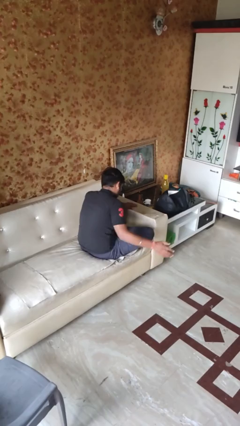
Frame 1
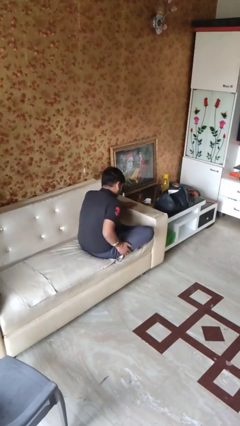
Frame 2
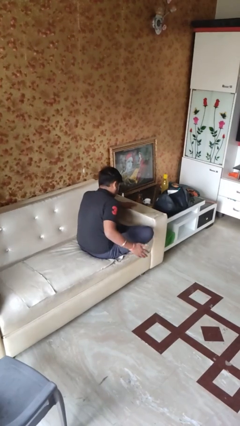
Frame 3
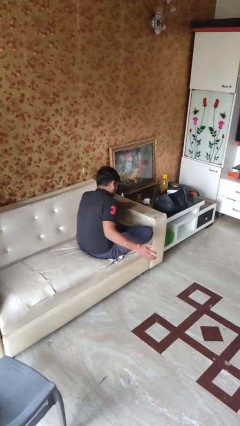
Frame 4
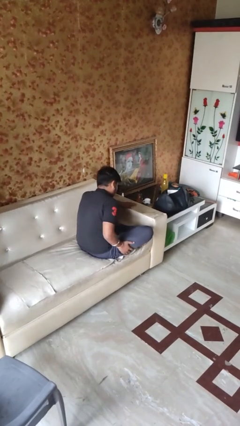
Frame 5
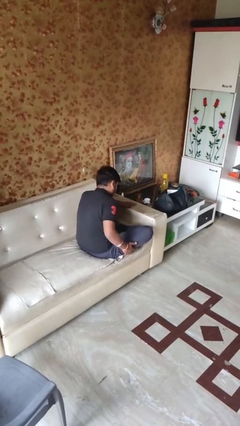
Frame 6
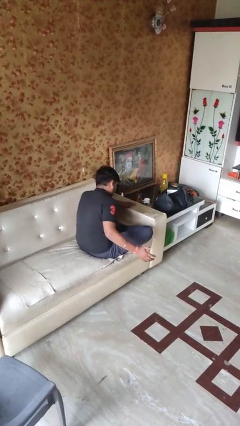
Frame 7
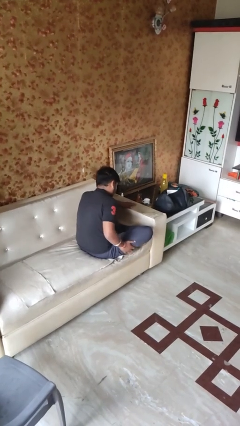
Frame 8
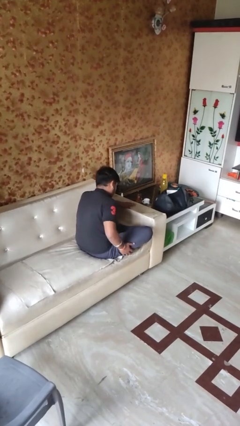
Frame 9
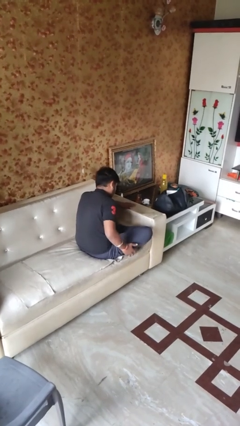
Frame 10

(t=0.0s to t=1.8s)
person slaps hands on thighs

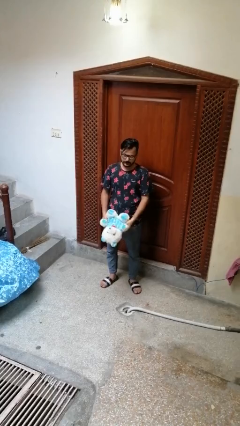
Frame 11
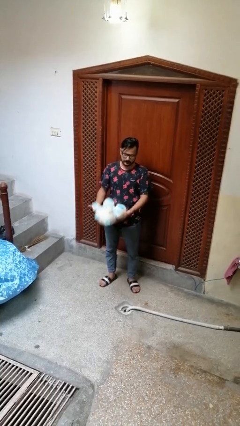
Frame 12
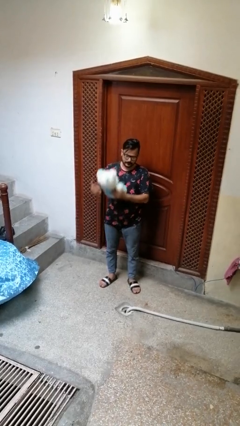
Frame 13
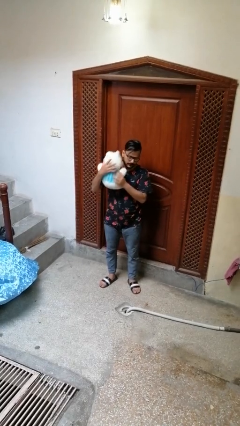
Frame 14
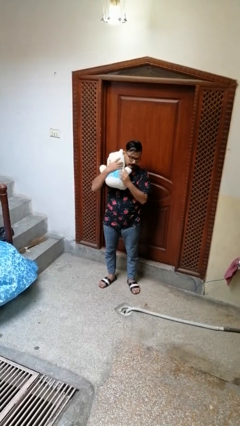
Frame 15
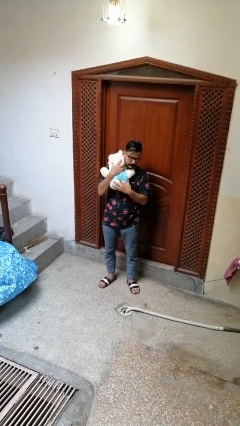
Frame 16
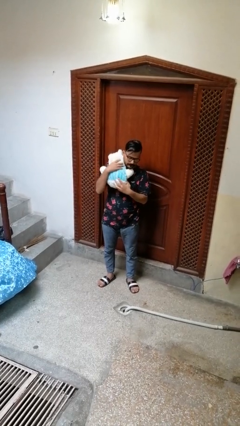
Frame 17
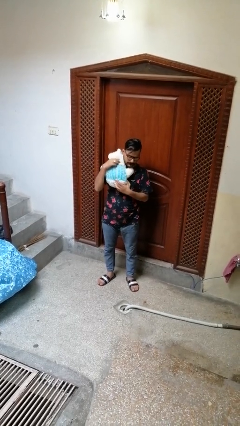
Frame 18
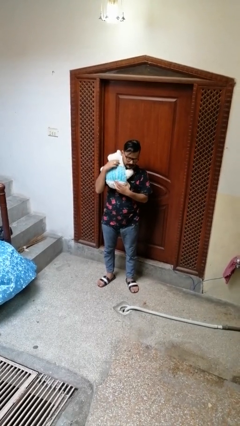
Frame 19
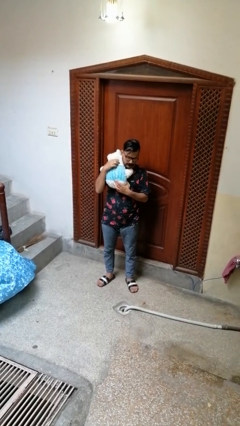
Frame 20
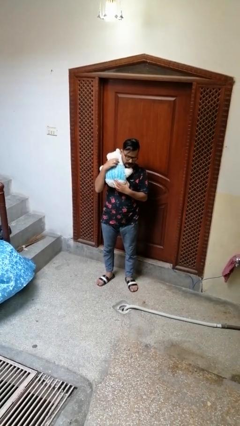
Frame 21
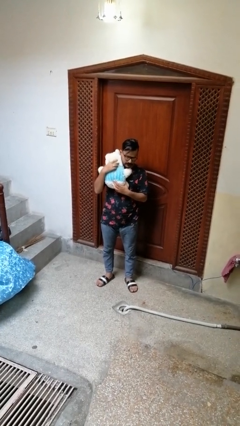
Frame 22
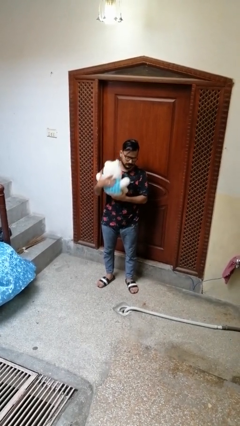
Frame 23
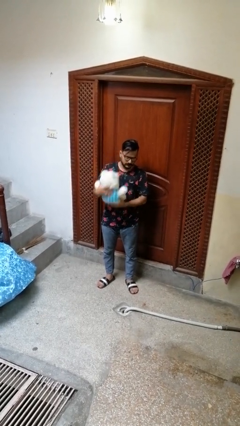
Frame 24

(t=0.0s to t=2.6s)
person hugs stuffed animal

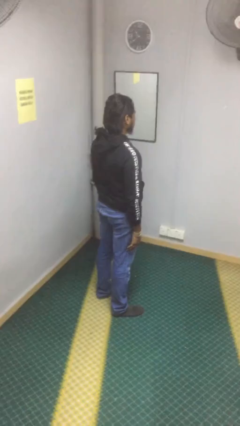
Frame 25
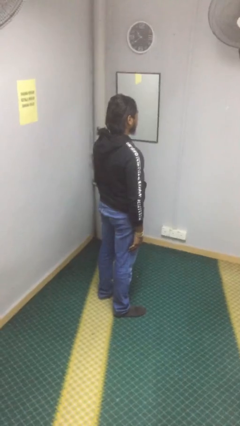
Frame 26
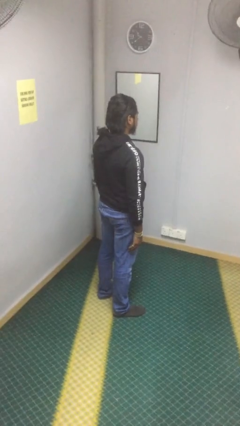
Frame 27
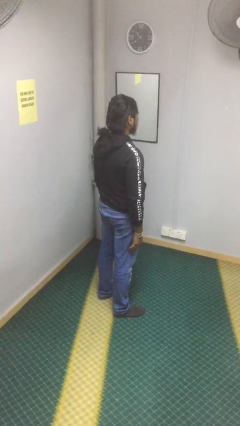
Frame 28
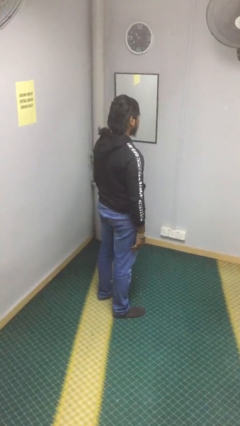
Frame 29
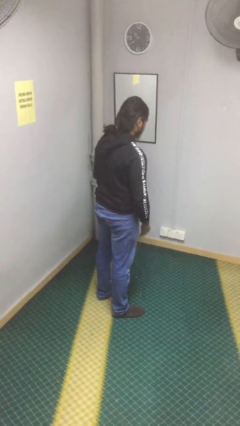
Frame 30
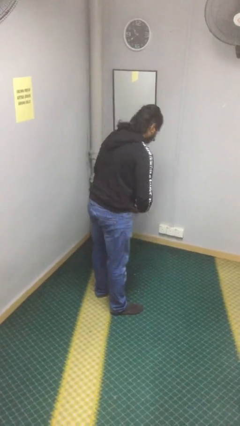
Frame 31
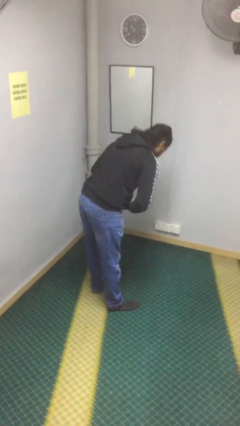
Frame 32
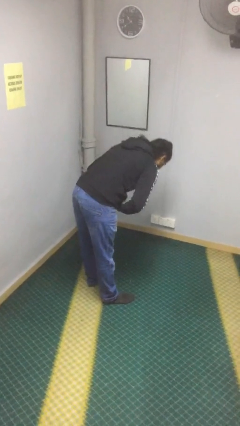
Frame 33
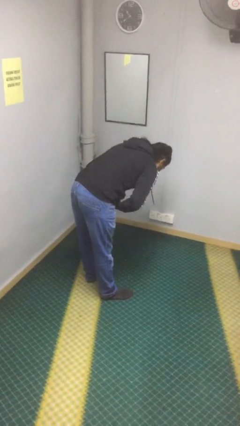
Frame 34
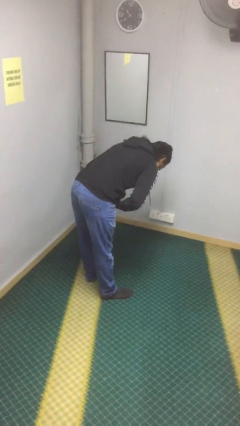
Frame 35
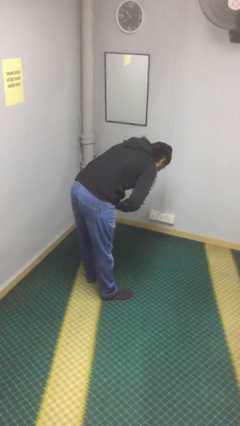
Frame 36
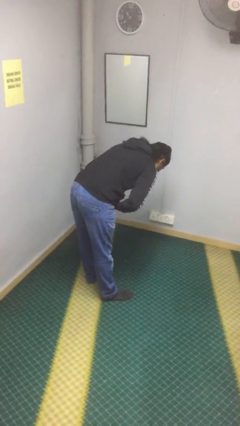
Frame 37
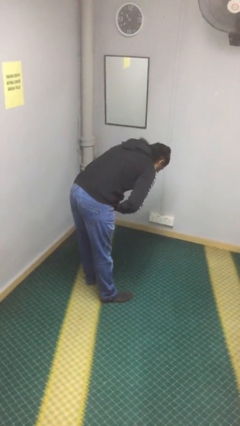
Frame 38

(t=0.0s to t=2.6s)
person bows

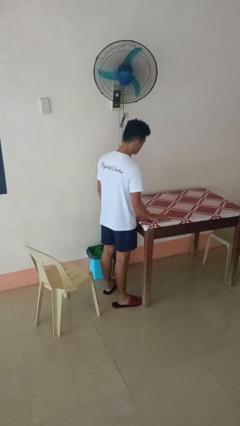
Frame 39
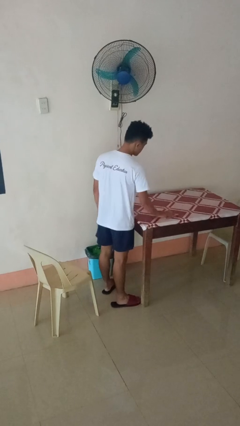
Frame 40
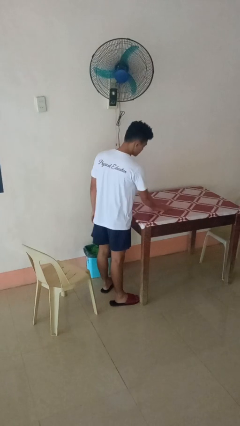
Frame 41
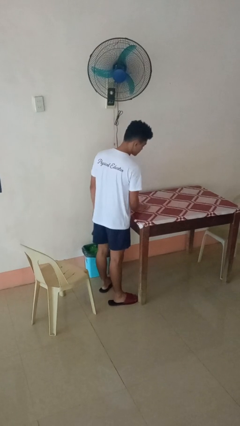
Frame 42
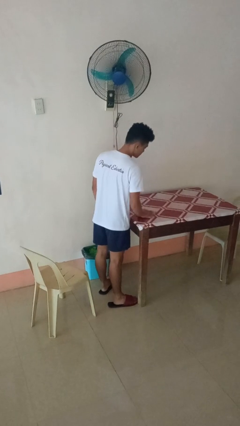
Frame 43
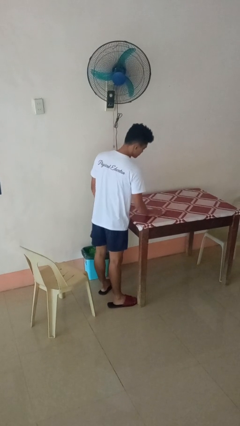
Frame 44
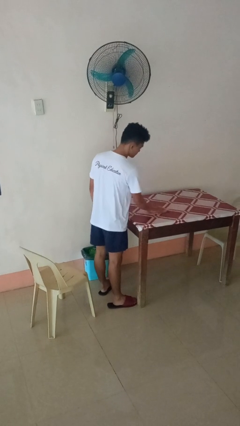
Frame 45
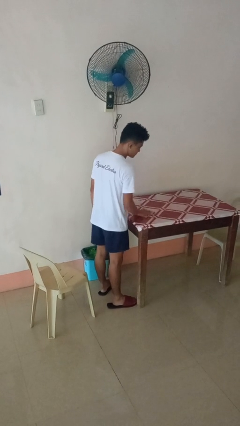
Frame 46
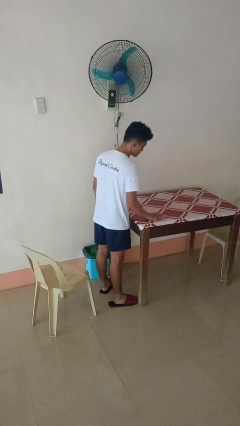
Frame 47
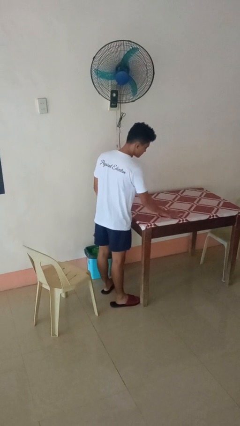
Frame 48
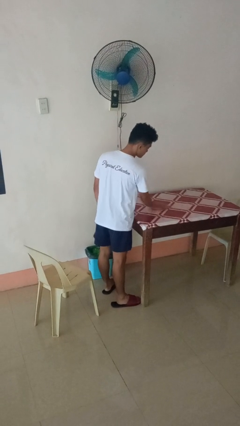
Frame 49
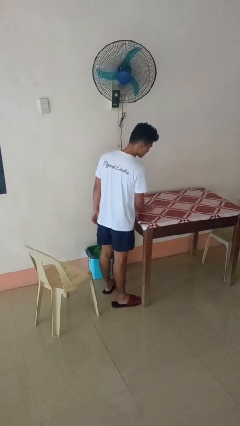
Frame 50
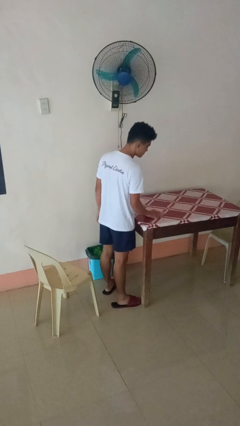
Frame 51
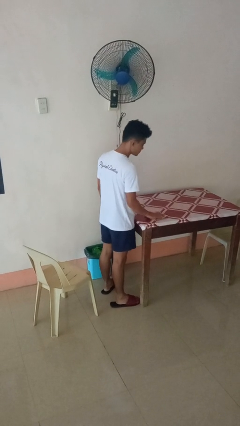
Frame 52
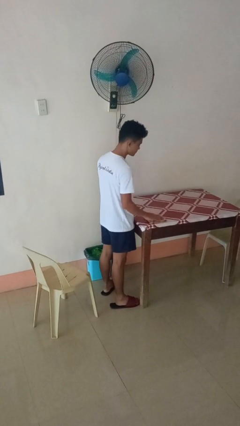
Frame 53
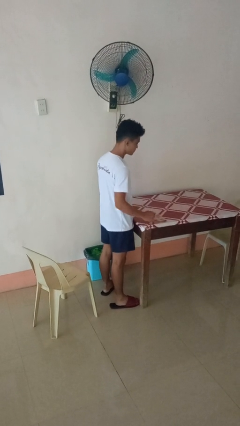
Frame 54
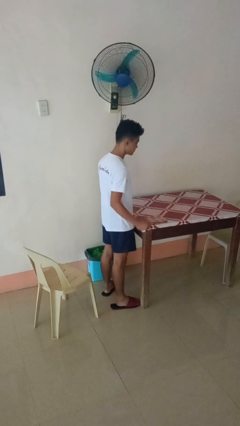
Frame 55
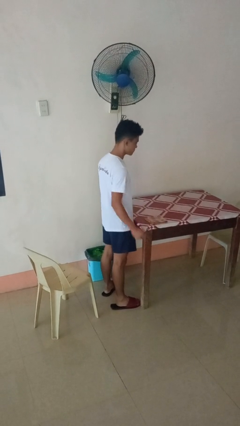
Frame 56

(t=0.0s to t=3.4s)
person cleans table with rag

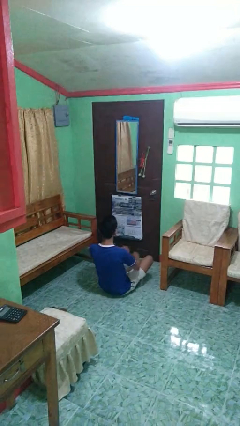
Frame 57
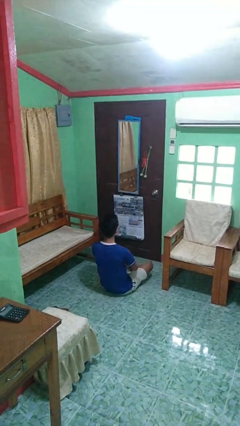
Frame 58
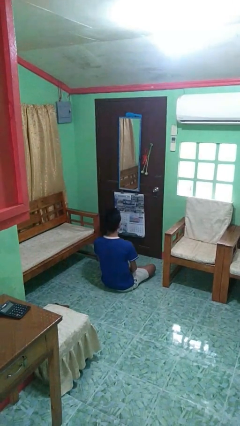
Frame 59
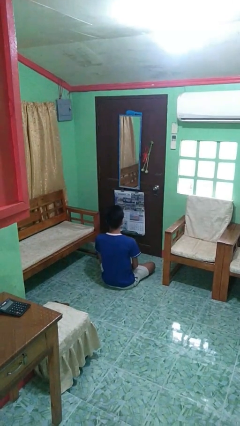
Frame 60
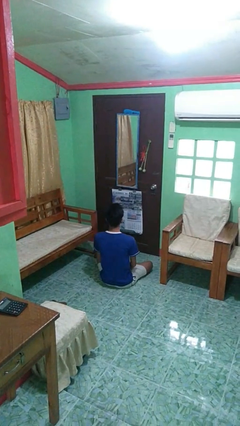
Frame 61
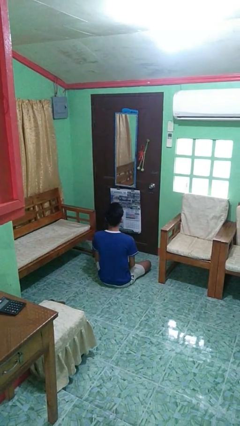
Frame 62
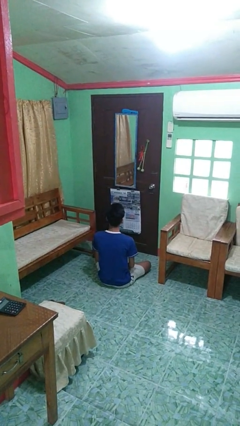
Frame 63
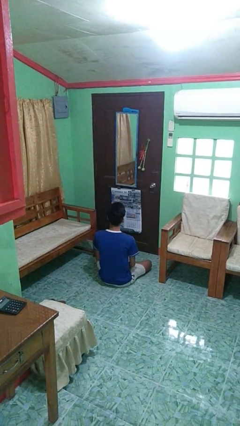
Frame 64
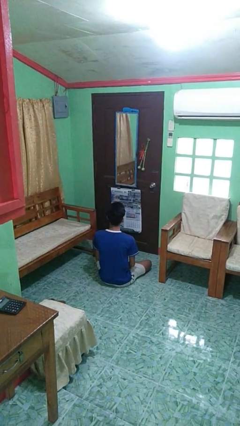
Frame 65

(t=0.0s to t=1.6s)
person squats

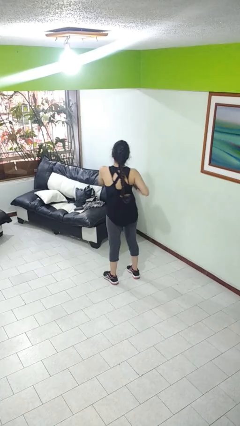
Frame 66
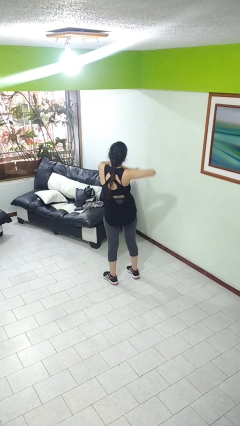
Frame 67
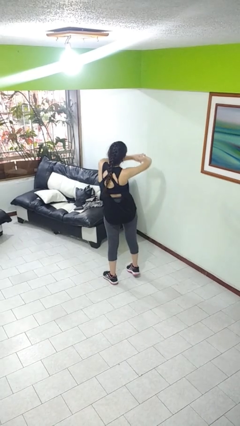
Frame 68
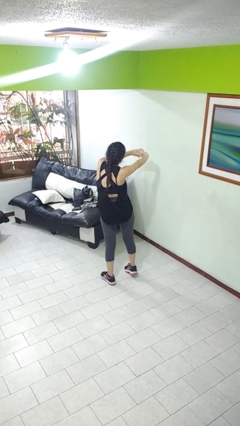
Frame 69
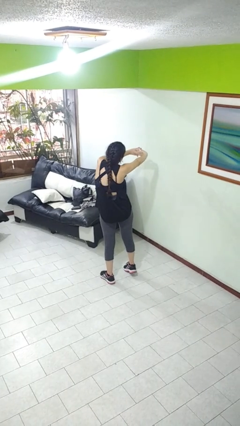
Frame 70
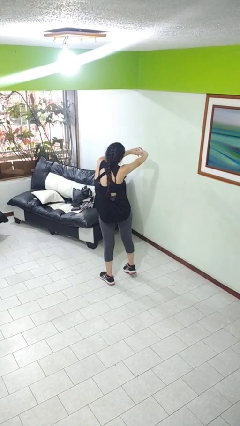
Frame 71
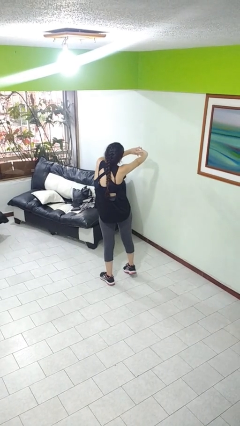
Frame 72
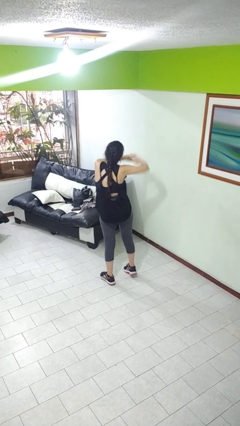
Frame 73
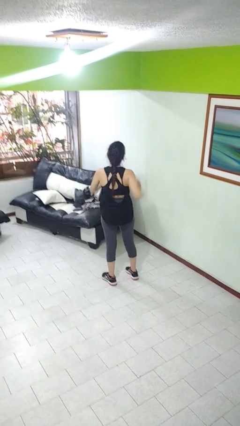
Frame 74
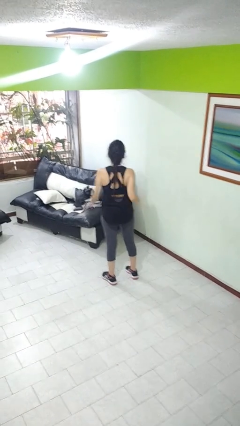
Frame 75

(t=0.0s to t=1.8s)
person stretches arms to side

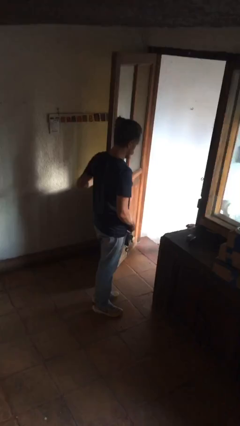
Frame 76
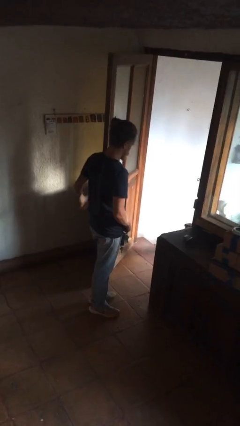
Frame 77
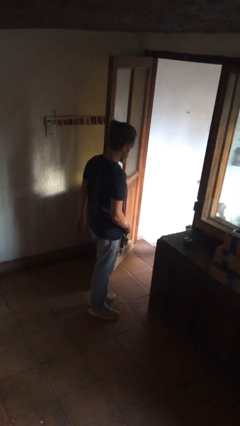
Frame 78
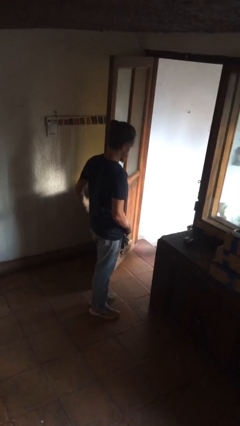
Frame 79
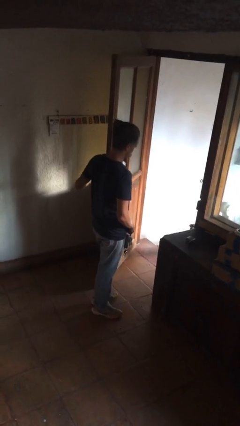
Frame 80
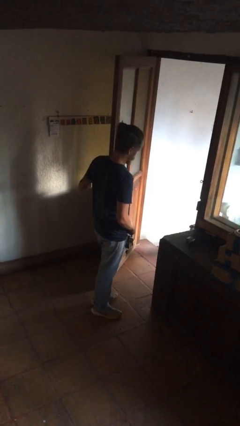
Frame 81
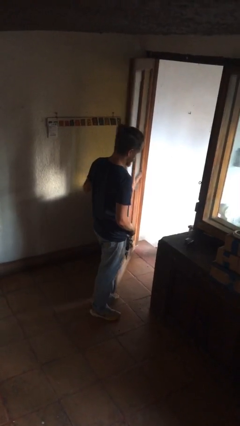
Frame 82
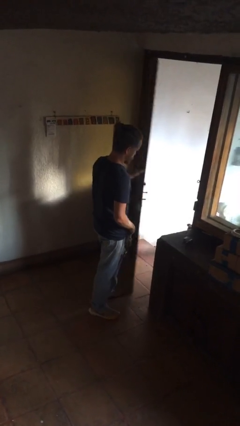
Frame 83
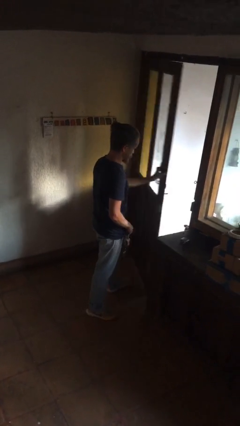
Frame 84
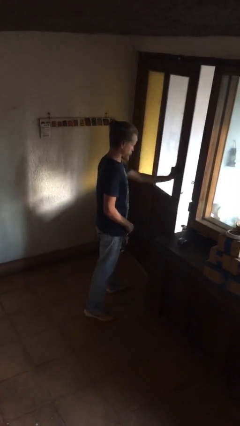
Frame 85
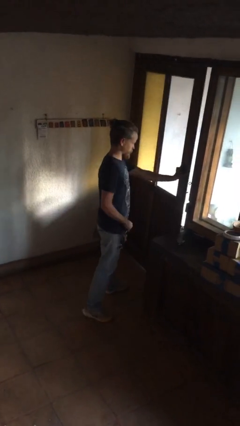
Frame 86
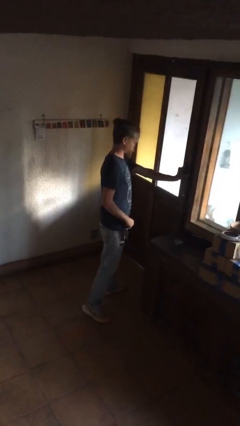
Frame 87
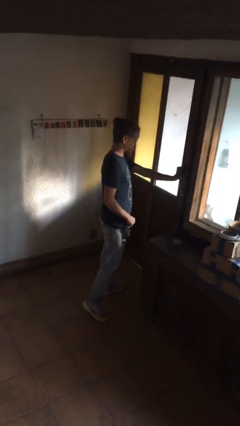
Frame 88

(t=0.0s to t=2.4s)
person closes facility door

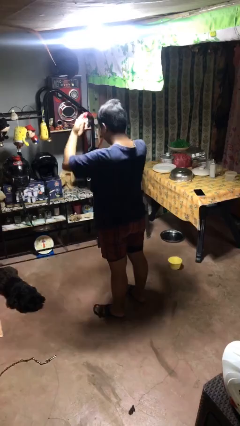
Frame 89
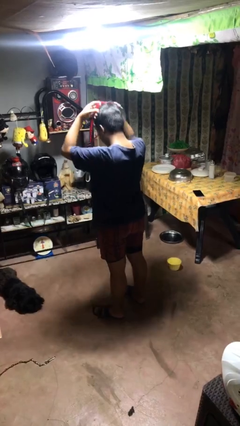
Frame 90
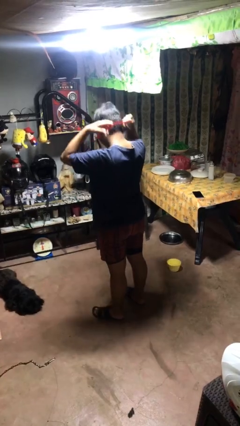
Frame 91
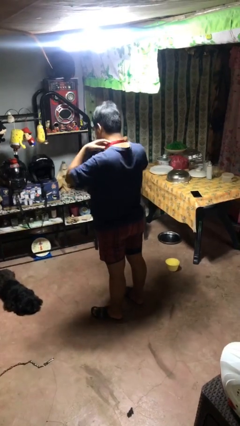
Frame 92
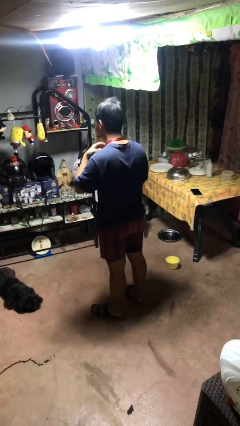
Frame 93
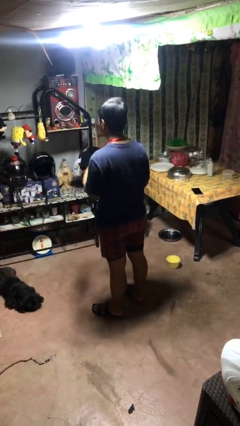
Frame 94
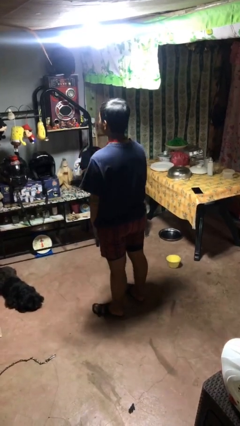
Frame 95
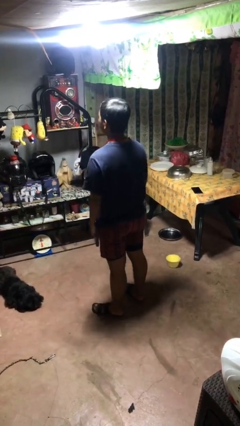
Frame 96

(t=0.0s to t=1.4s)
person puts on necklace
